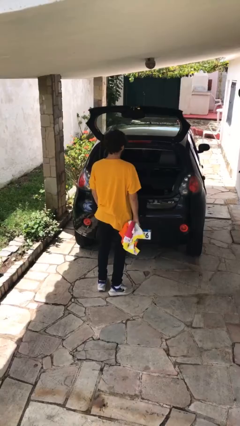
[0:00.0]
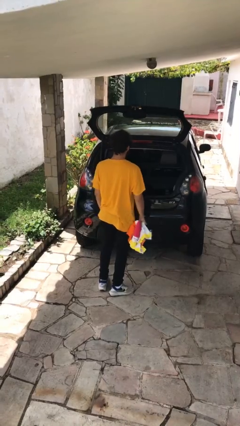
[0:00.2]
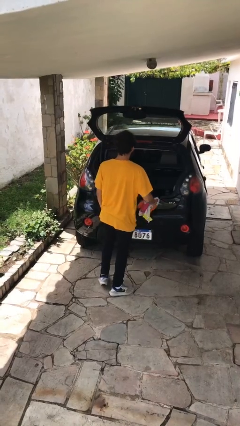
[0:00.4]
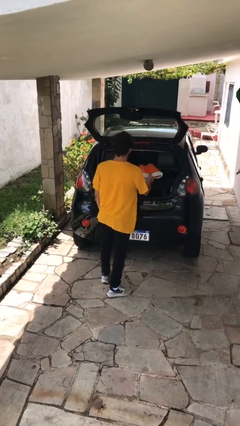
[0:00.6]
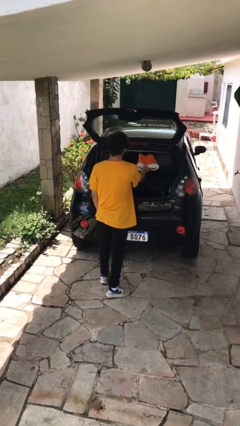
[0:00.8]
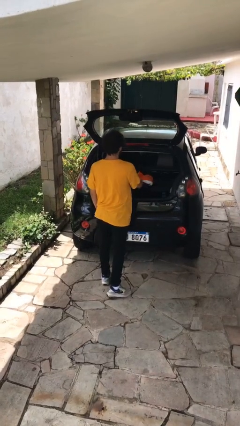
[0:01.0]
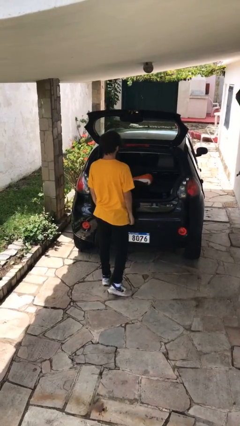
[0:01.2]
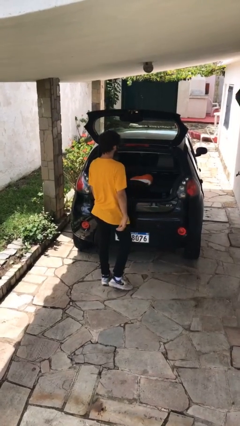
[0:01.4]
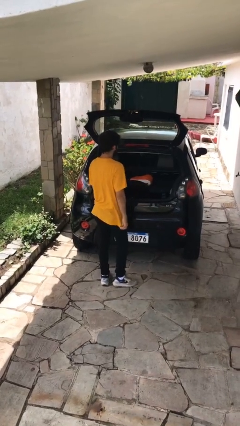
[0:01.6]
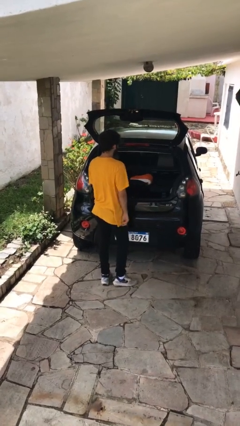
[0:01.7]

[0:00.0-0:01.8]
person loads car

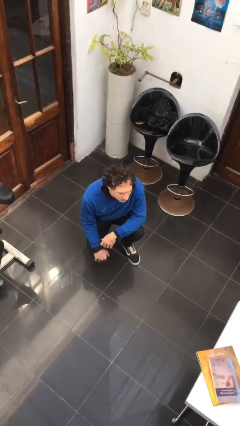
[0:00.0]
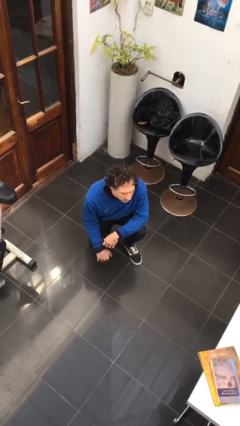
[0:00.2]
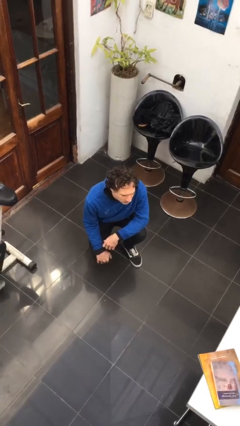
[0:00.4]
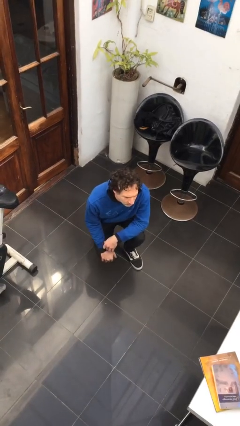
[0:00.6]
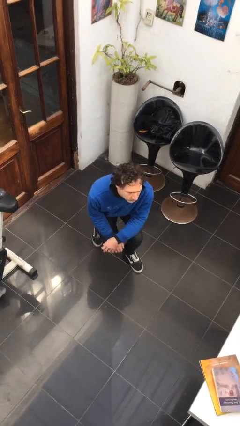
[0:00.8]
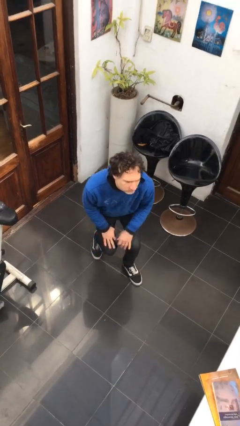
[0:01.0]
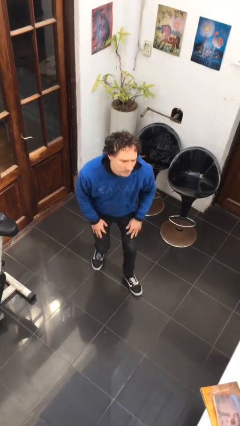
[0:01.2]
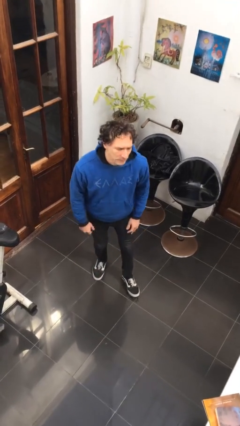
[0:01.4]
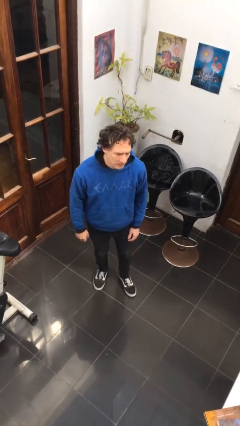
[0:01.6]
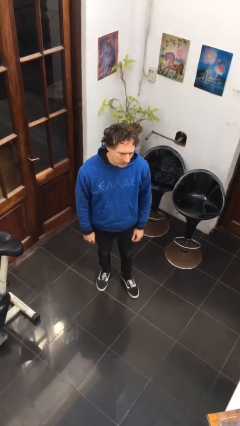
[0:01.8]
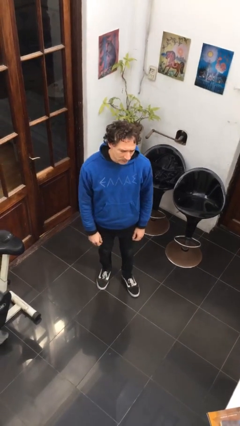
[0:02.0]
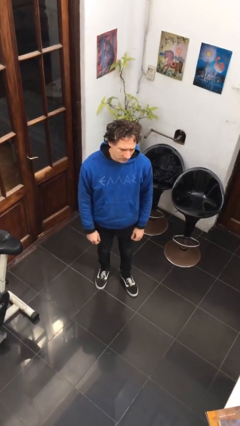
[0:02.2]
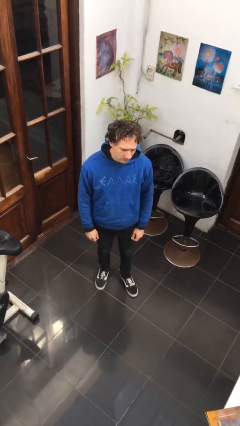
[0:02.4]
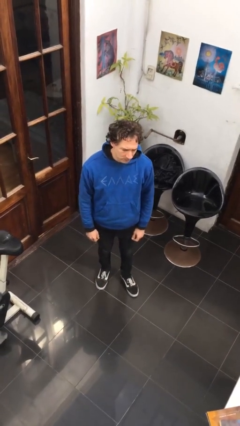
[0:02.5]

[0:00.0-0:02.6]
person stands up

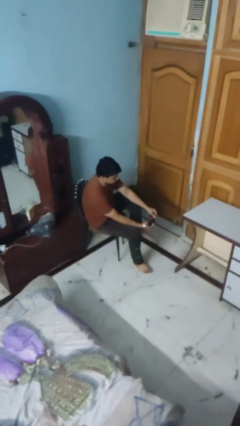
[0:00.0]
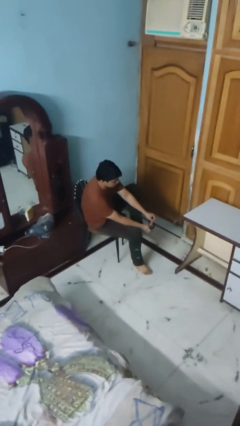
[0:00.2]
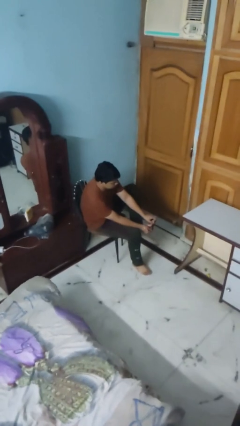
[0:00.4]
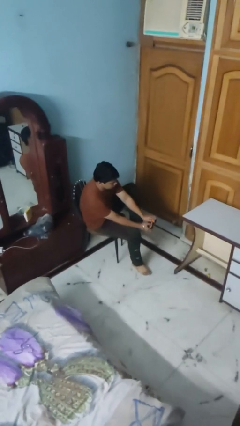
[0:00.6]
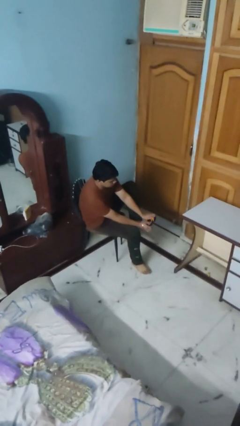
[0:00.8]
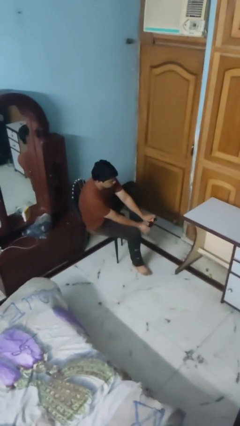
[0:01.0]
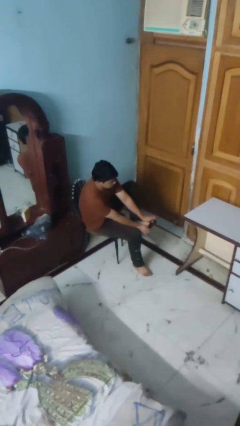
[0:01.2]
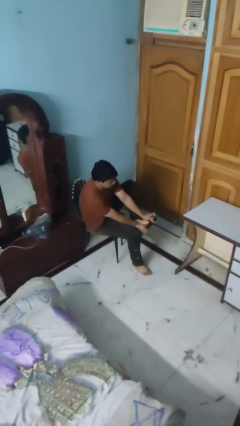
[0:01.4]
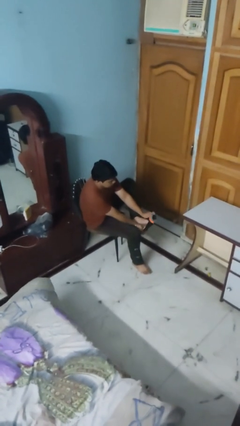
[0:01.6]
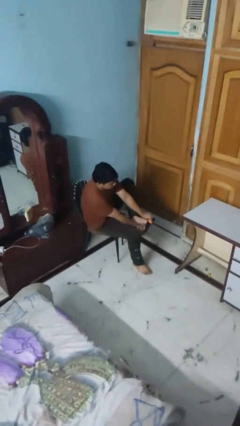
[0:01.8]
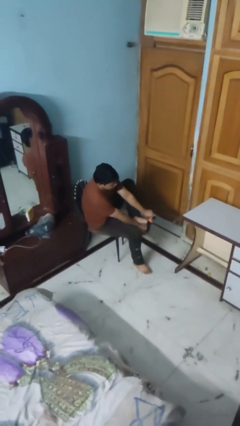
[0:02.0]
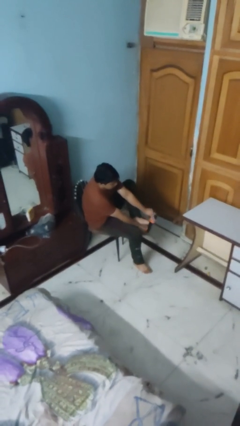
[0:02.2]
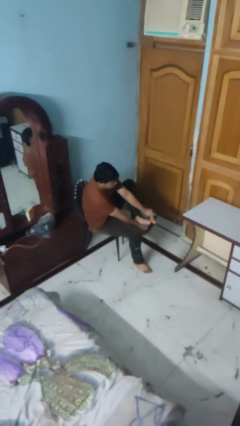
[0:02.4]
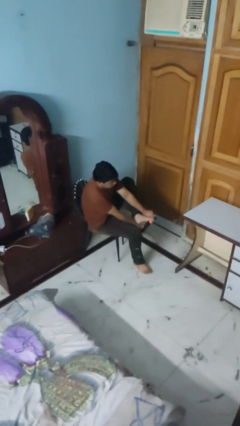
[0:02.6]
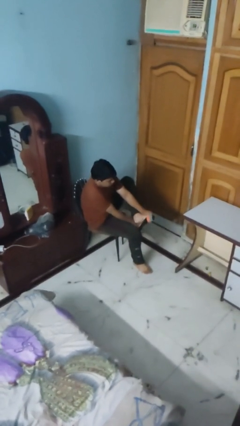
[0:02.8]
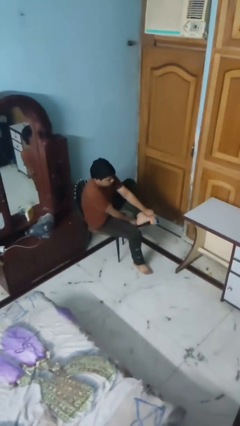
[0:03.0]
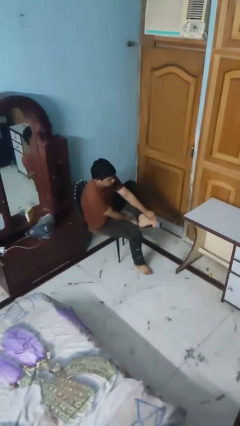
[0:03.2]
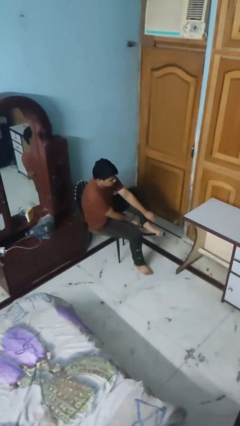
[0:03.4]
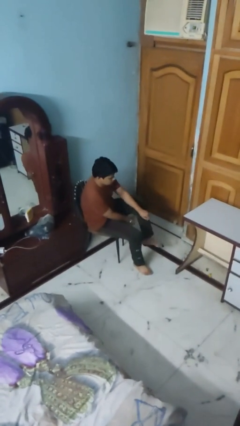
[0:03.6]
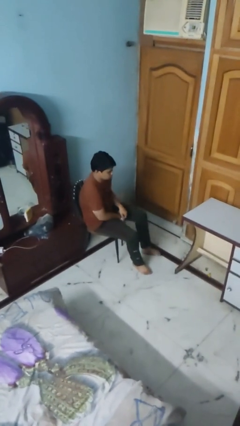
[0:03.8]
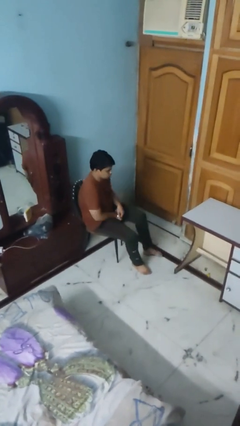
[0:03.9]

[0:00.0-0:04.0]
person puts on socks

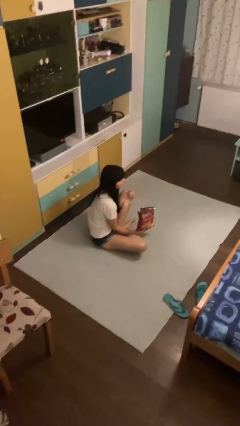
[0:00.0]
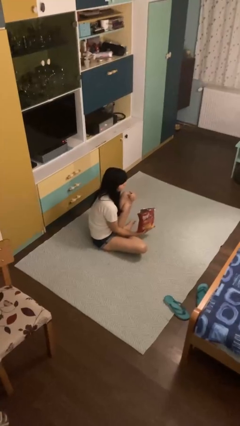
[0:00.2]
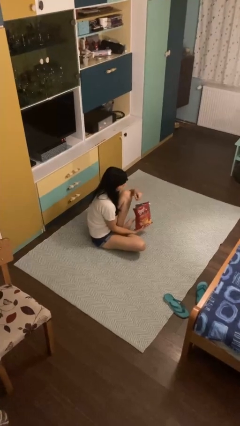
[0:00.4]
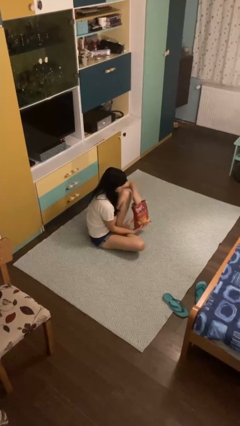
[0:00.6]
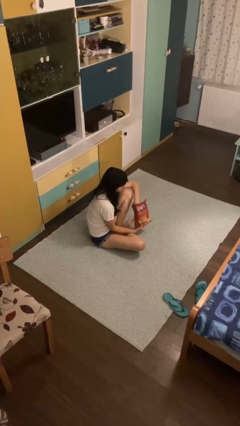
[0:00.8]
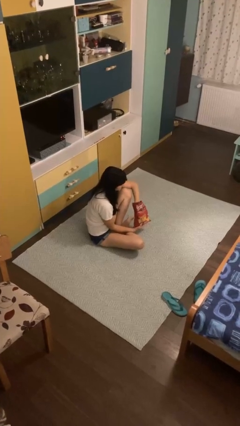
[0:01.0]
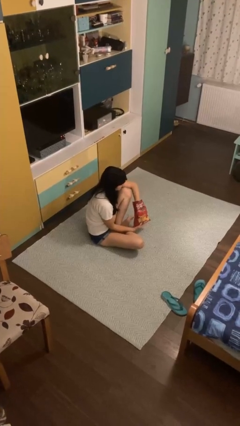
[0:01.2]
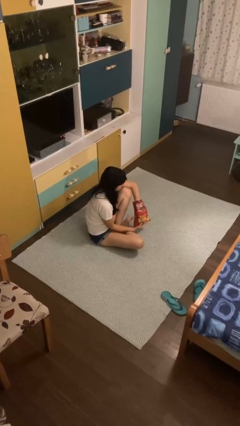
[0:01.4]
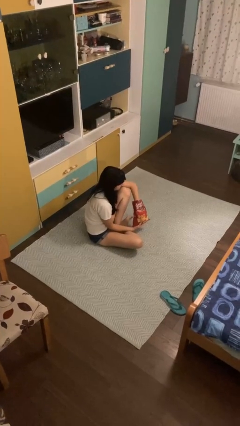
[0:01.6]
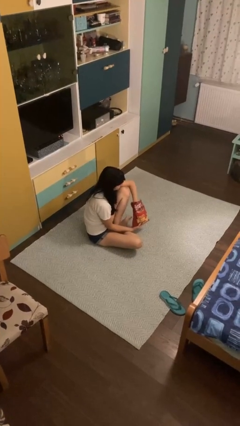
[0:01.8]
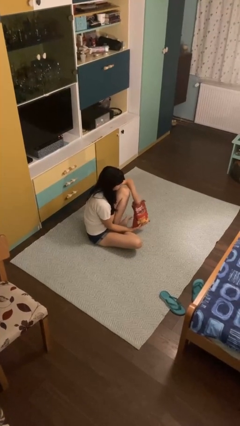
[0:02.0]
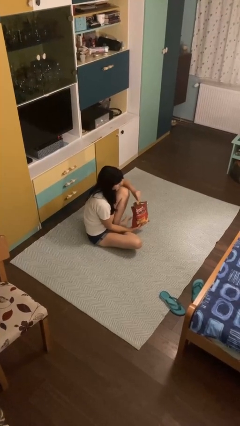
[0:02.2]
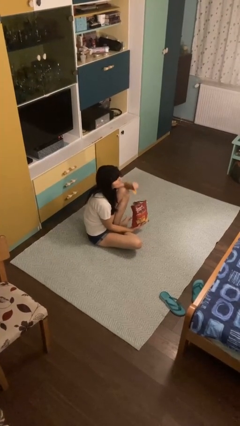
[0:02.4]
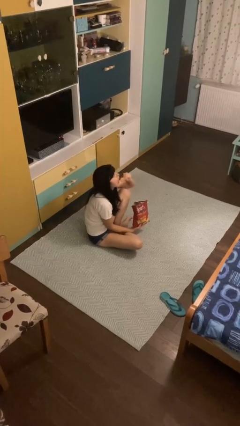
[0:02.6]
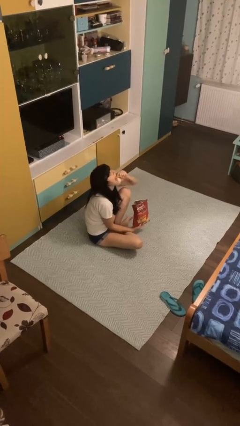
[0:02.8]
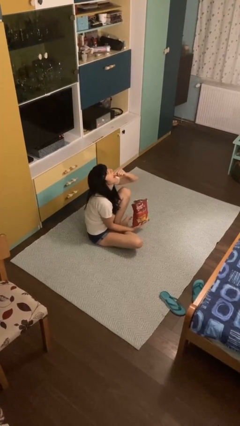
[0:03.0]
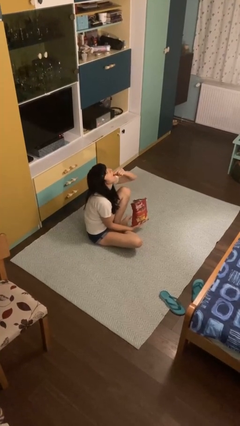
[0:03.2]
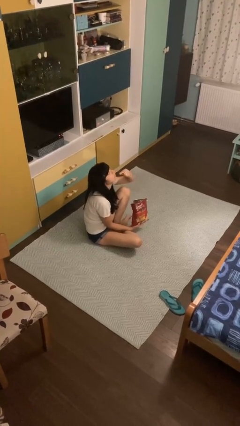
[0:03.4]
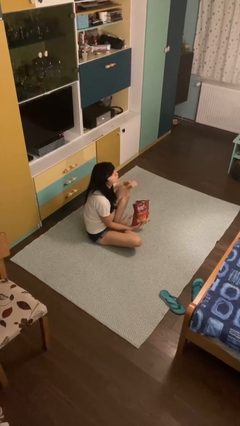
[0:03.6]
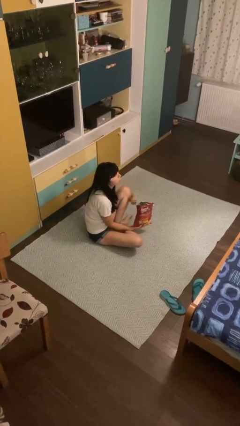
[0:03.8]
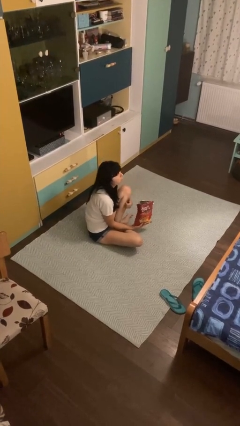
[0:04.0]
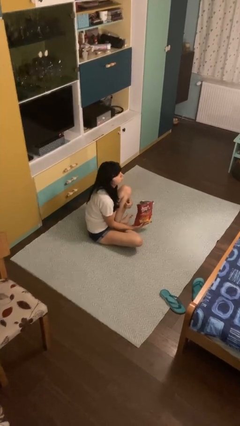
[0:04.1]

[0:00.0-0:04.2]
person eats snack from bag

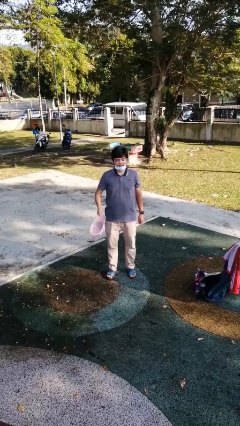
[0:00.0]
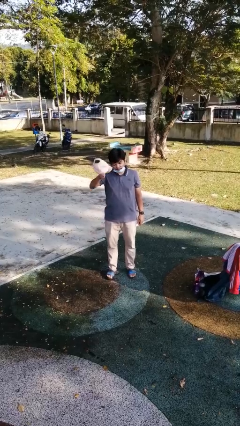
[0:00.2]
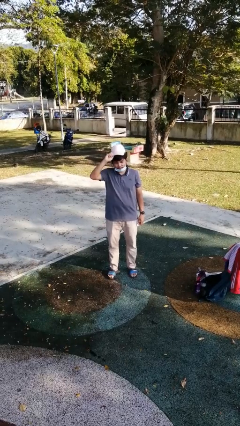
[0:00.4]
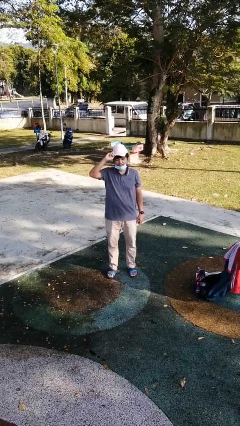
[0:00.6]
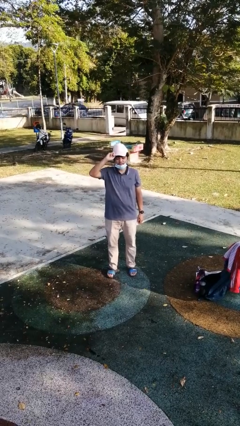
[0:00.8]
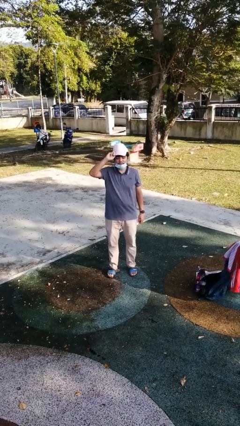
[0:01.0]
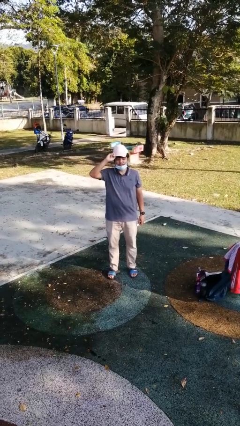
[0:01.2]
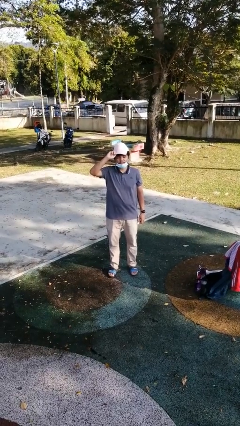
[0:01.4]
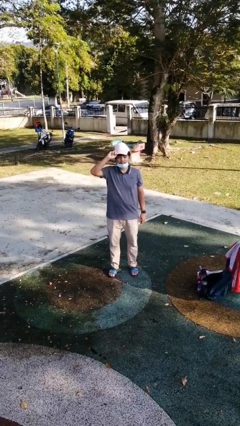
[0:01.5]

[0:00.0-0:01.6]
person puts on hat

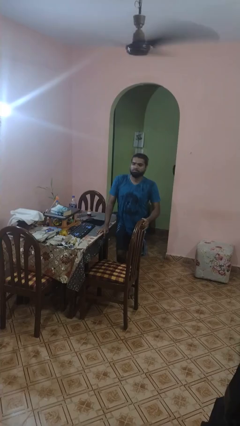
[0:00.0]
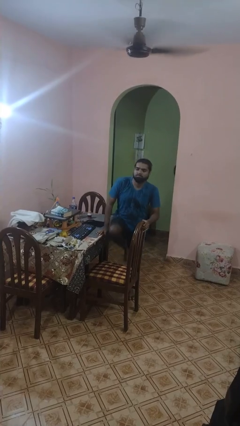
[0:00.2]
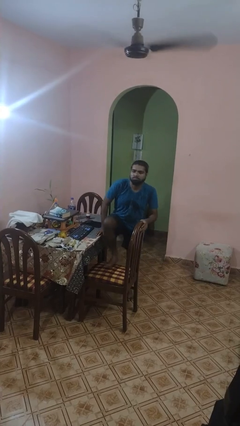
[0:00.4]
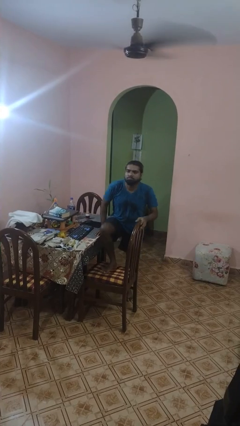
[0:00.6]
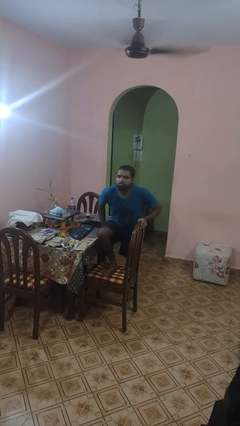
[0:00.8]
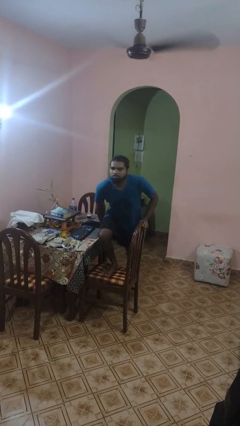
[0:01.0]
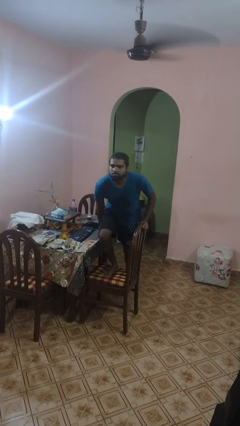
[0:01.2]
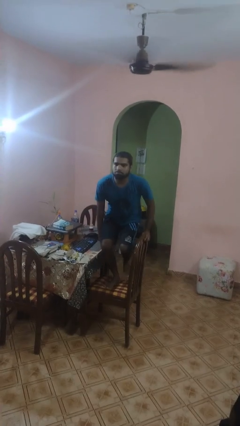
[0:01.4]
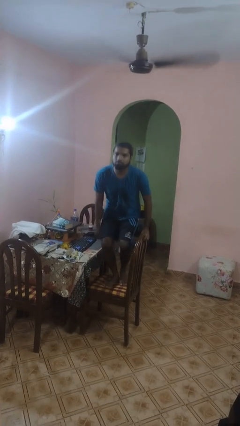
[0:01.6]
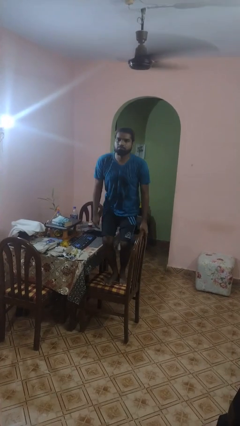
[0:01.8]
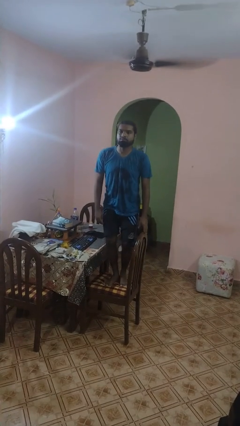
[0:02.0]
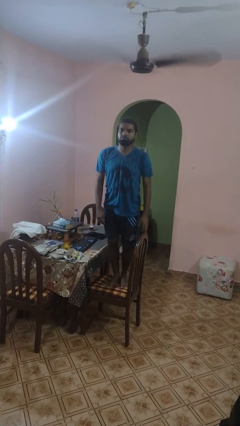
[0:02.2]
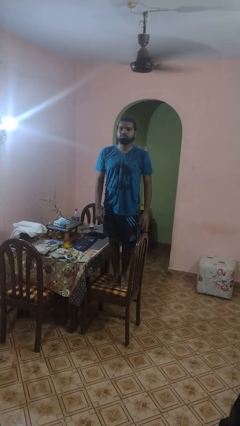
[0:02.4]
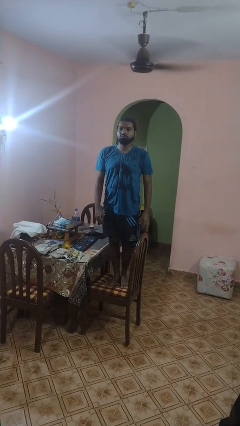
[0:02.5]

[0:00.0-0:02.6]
person climbs on chair

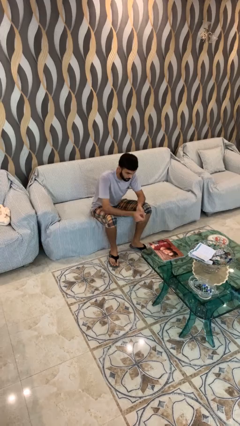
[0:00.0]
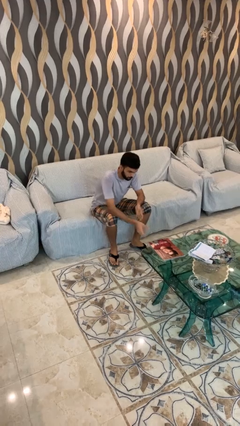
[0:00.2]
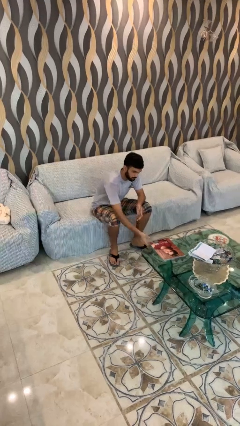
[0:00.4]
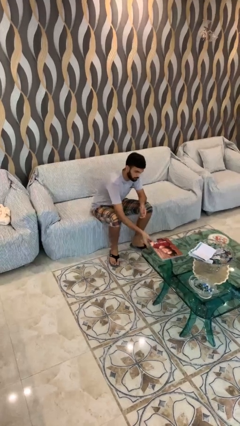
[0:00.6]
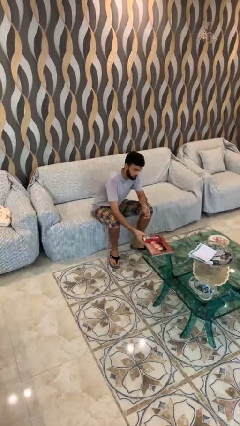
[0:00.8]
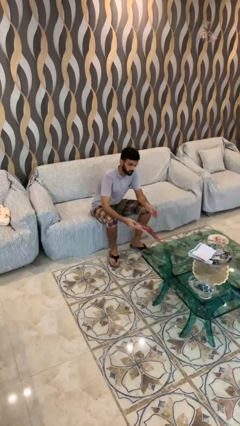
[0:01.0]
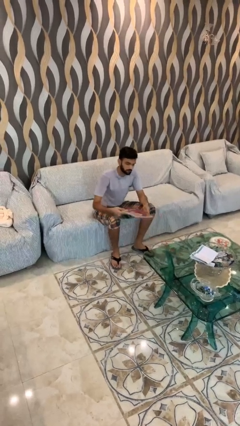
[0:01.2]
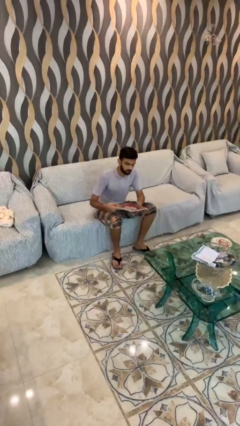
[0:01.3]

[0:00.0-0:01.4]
person picks up object from table
